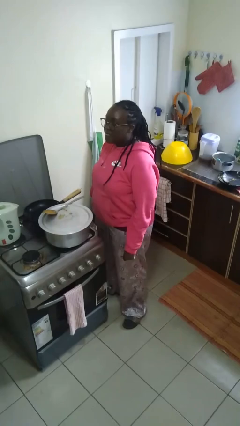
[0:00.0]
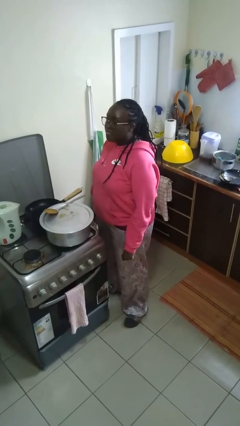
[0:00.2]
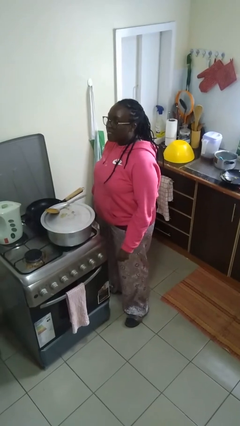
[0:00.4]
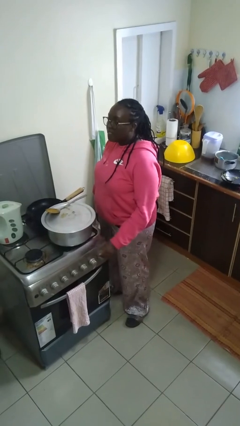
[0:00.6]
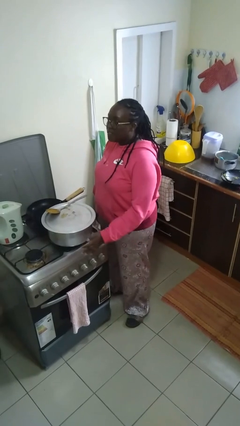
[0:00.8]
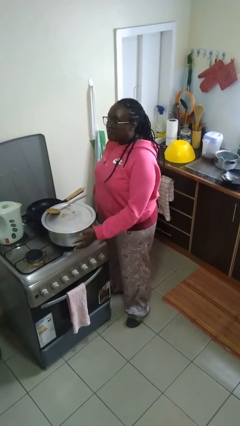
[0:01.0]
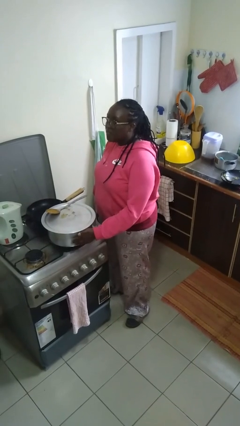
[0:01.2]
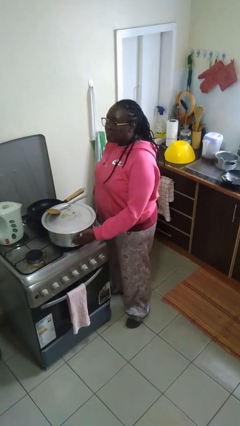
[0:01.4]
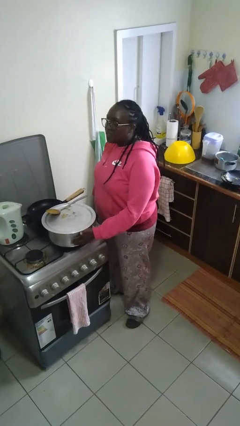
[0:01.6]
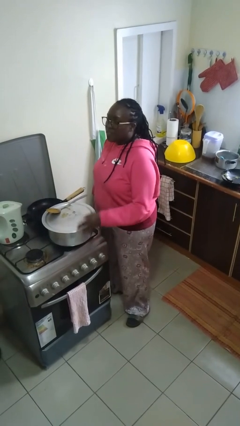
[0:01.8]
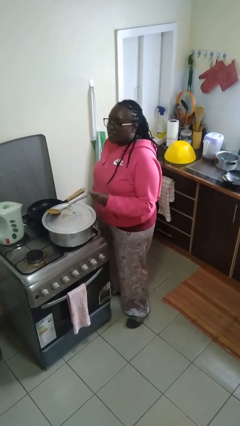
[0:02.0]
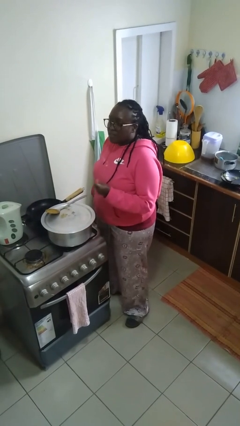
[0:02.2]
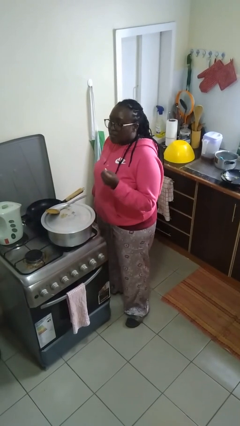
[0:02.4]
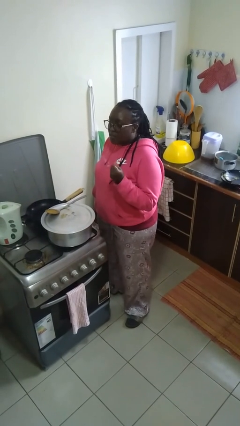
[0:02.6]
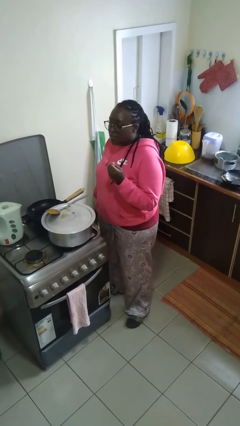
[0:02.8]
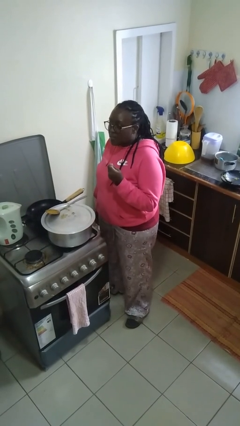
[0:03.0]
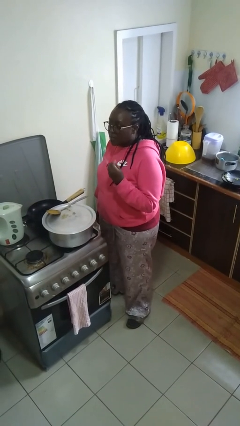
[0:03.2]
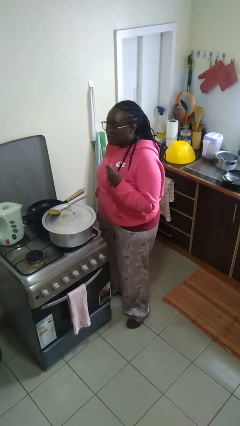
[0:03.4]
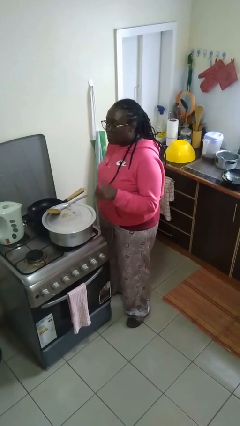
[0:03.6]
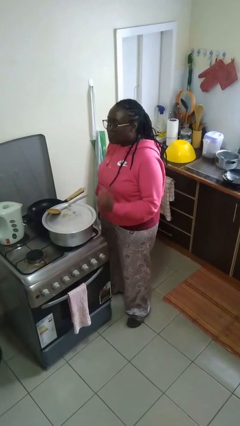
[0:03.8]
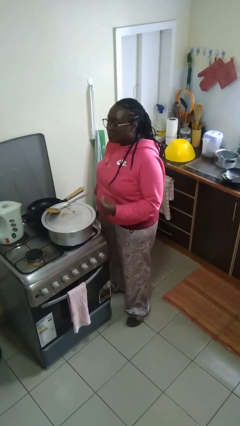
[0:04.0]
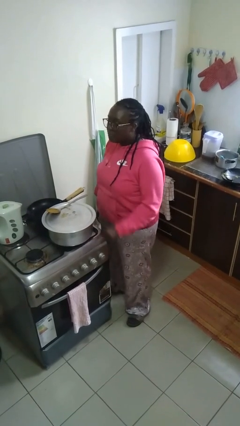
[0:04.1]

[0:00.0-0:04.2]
person burns hand

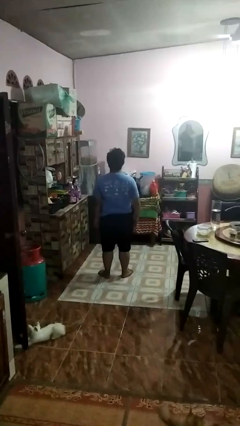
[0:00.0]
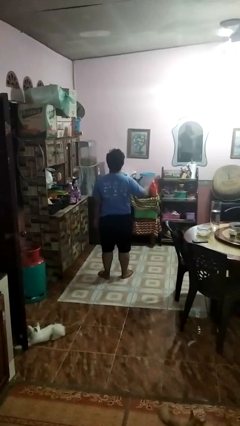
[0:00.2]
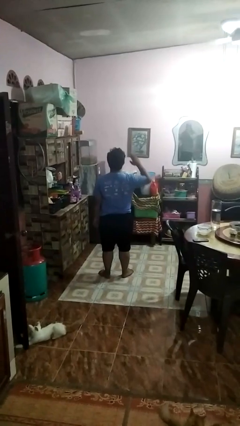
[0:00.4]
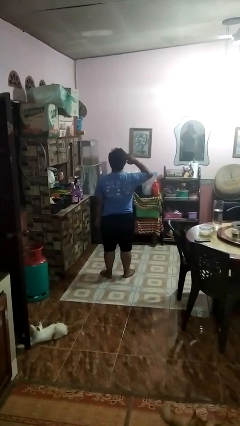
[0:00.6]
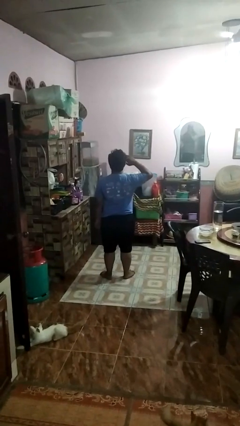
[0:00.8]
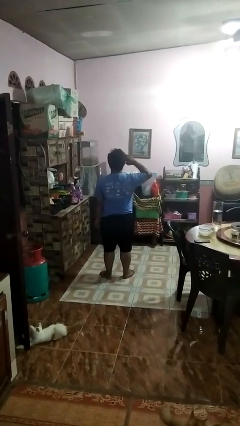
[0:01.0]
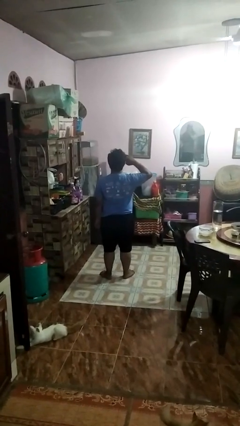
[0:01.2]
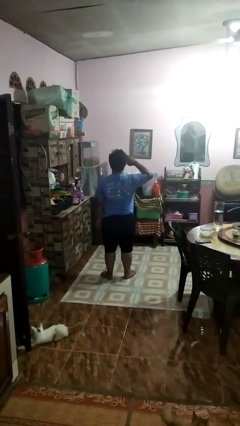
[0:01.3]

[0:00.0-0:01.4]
person salutes

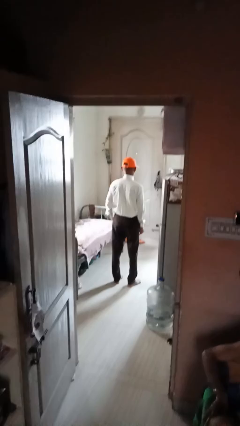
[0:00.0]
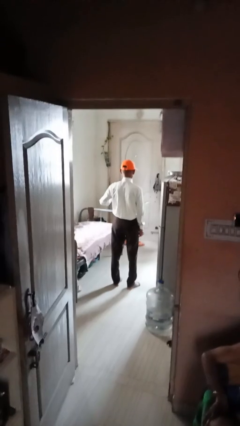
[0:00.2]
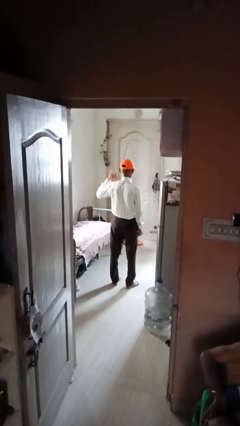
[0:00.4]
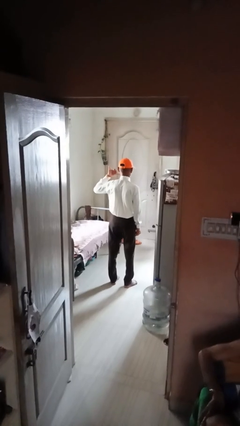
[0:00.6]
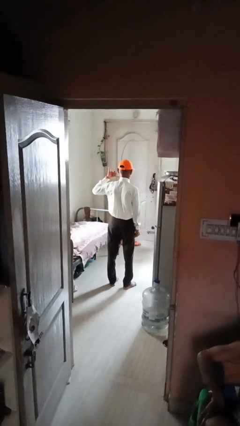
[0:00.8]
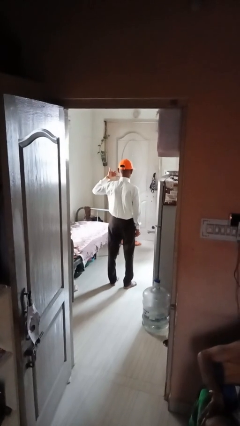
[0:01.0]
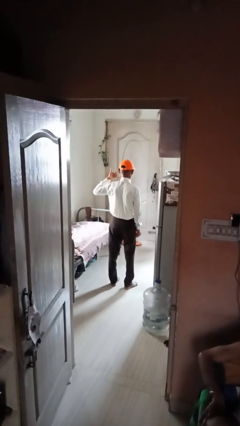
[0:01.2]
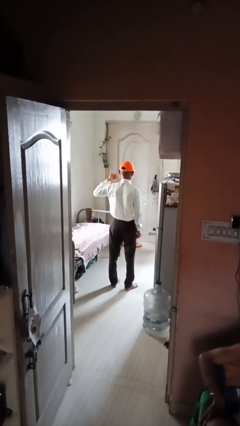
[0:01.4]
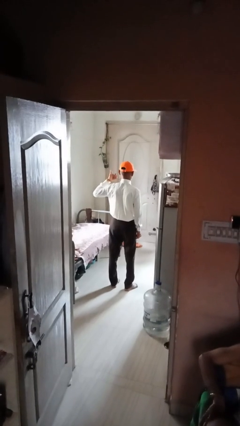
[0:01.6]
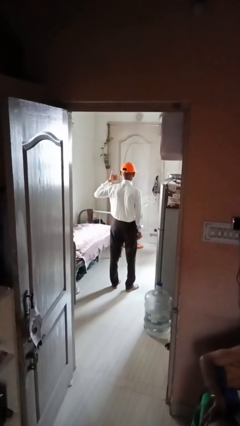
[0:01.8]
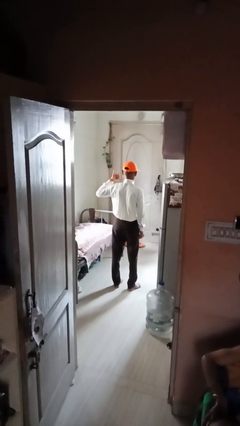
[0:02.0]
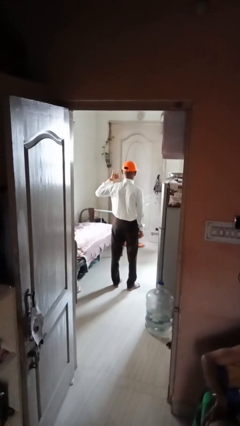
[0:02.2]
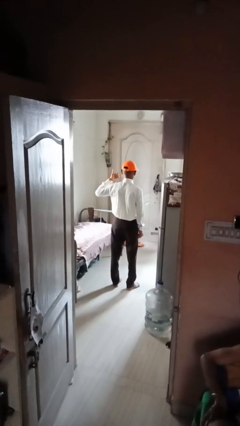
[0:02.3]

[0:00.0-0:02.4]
person gestures call me

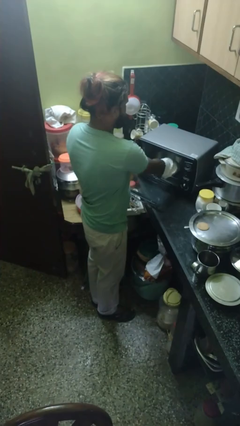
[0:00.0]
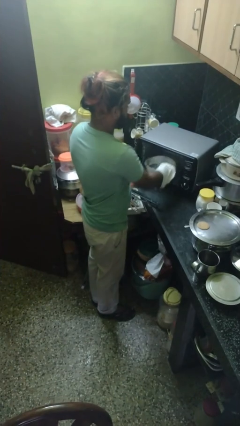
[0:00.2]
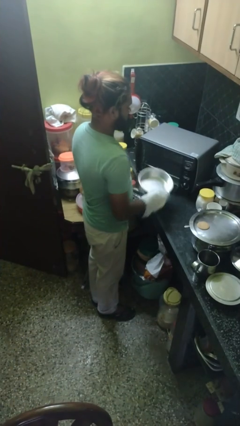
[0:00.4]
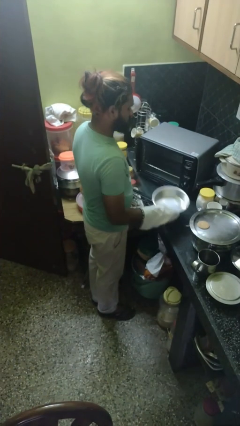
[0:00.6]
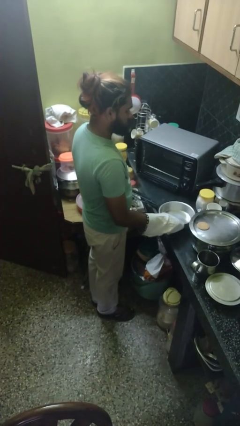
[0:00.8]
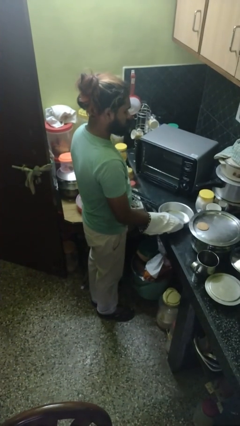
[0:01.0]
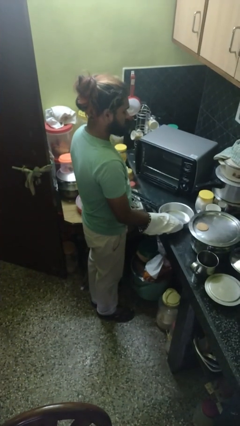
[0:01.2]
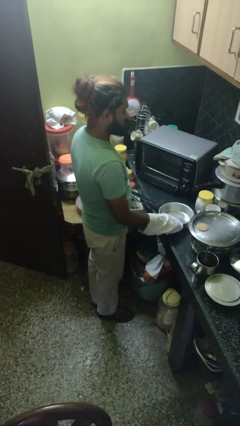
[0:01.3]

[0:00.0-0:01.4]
person takes object from oven

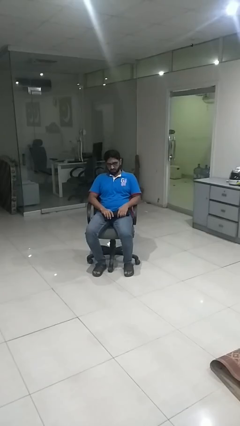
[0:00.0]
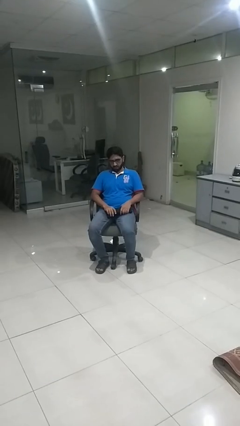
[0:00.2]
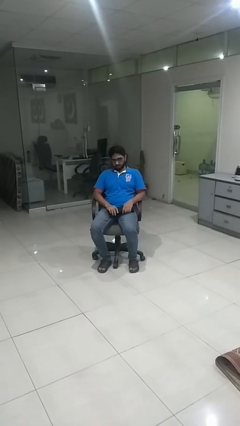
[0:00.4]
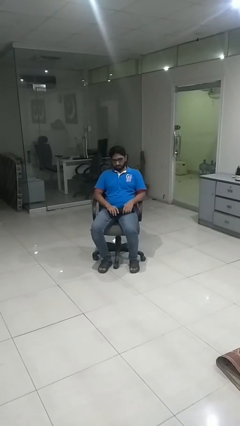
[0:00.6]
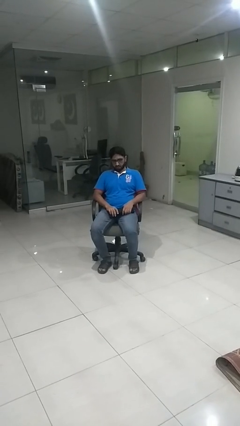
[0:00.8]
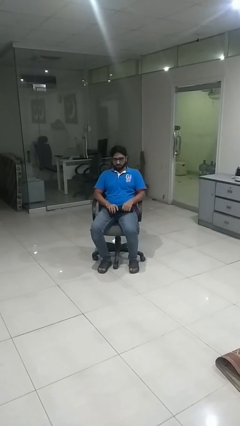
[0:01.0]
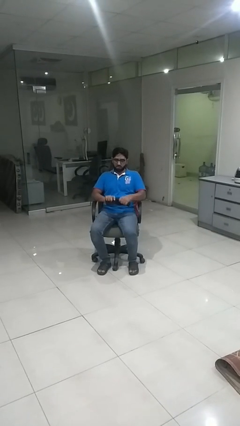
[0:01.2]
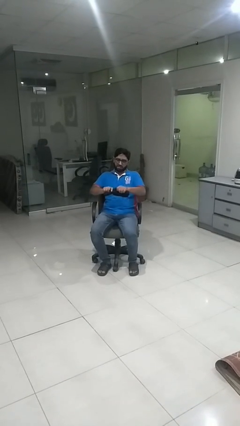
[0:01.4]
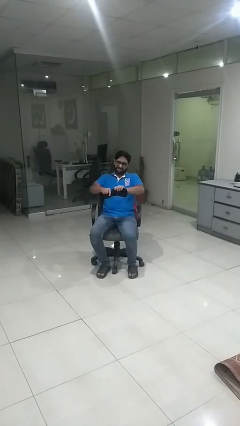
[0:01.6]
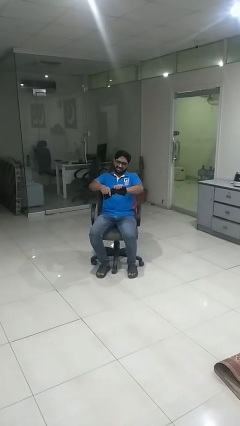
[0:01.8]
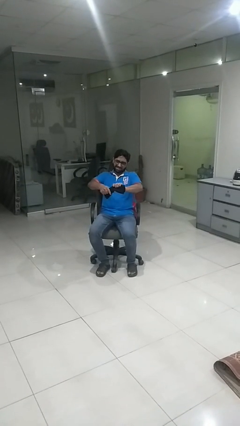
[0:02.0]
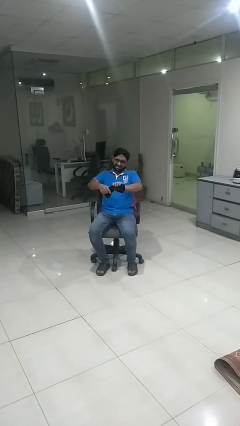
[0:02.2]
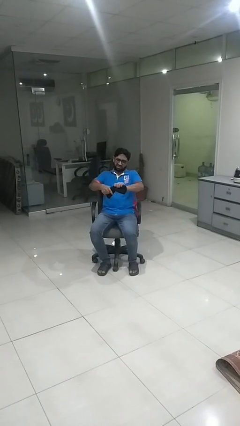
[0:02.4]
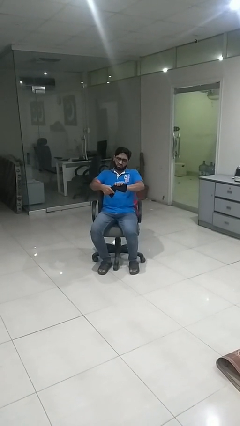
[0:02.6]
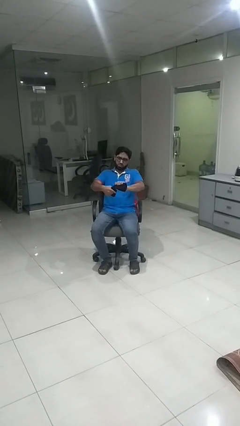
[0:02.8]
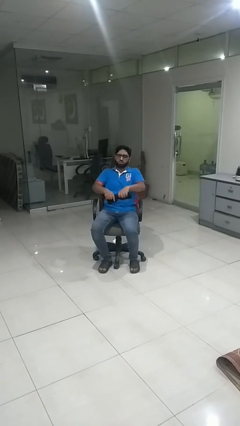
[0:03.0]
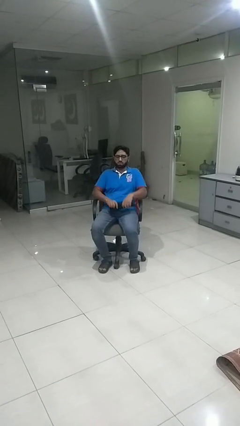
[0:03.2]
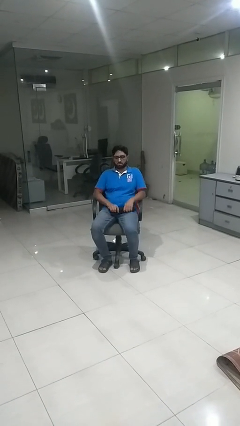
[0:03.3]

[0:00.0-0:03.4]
person squeezes object

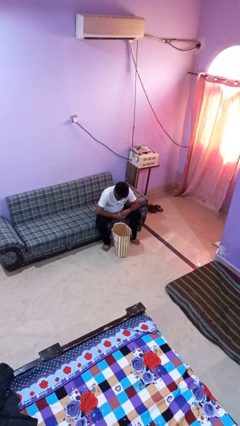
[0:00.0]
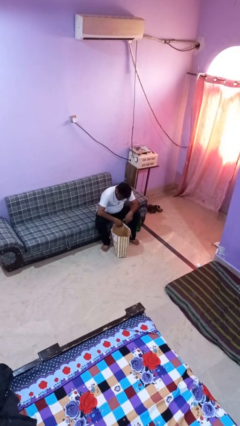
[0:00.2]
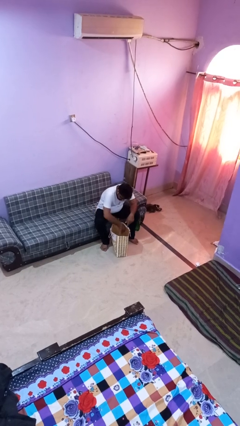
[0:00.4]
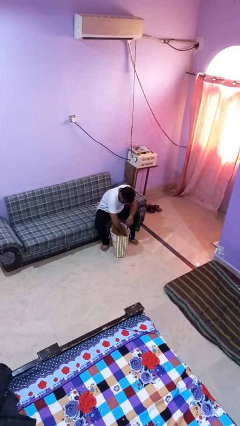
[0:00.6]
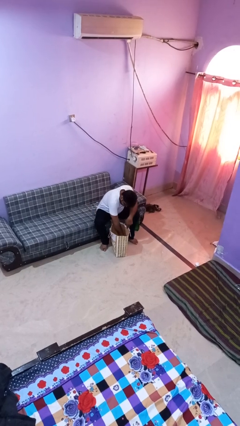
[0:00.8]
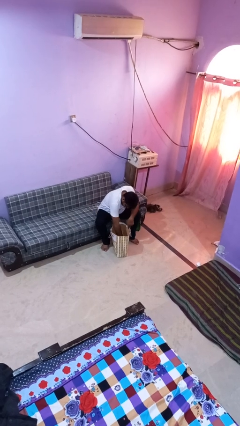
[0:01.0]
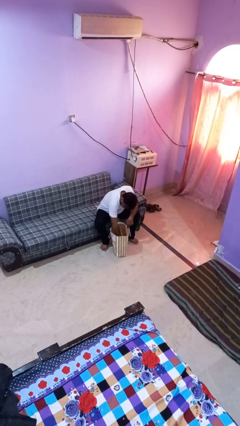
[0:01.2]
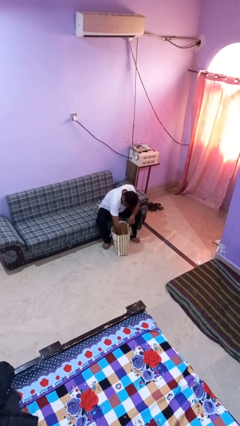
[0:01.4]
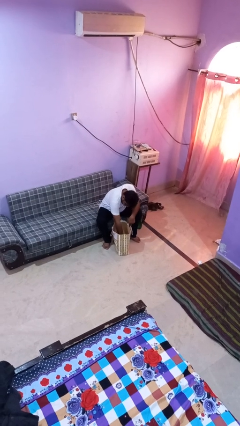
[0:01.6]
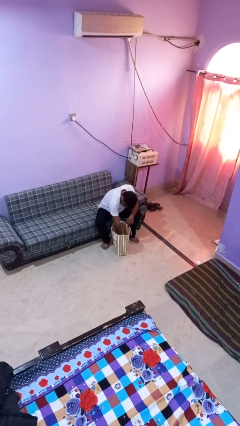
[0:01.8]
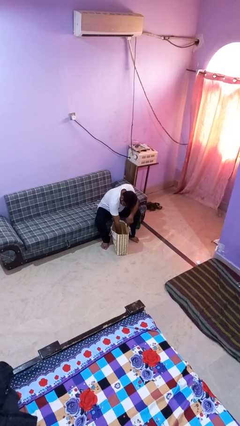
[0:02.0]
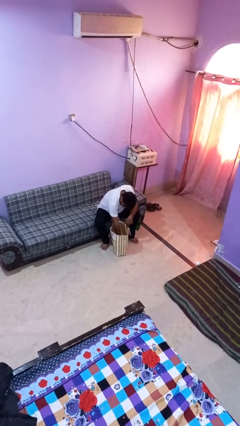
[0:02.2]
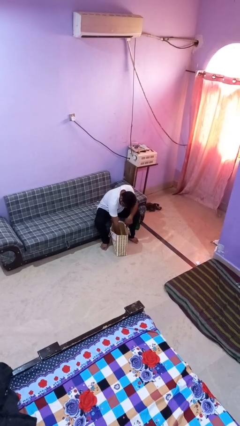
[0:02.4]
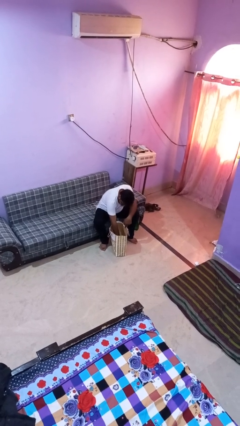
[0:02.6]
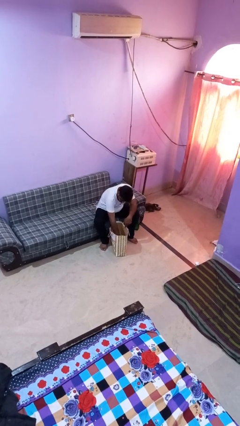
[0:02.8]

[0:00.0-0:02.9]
person searches in bag

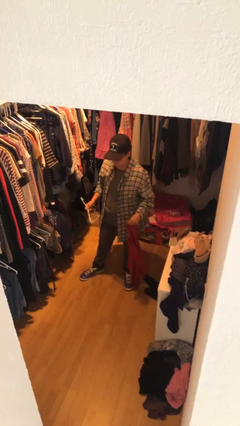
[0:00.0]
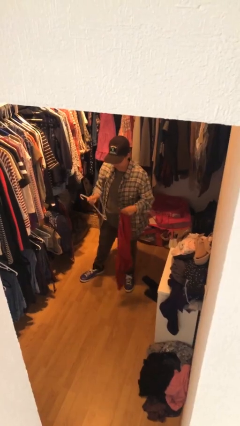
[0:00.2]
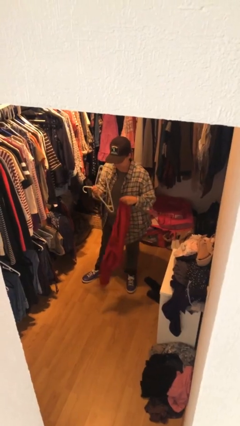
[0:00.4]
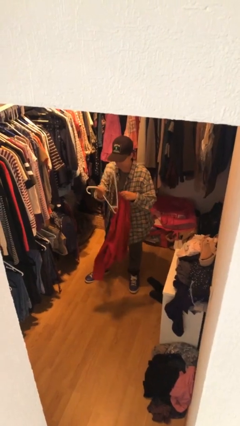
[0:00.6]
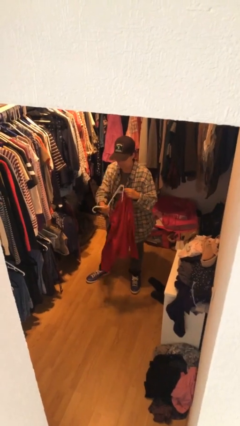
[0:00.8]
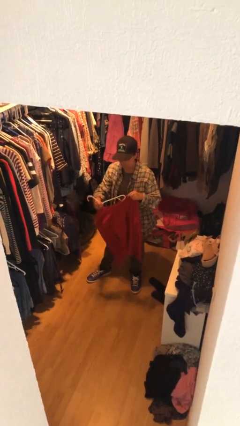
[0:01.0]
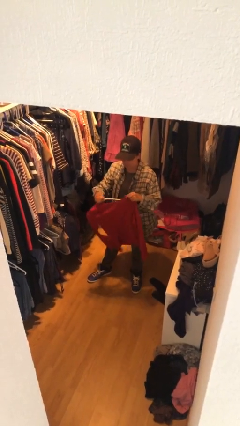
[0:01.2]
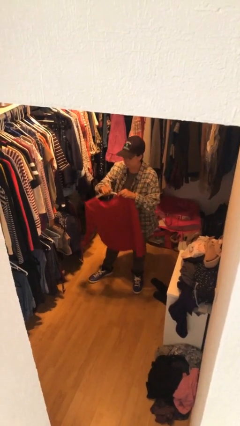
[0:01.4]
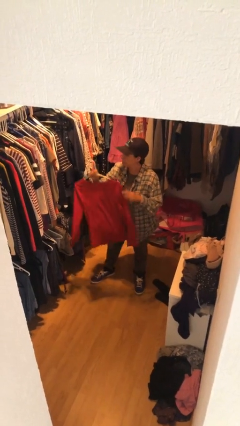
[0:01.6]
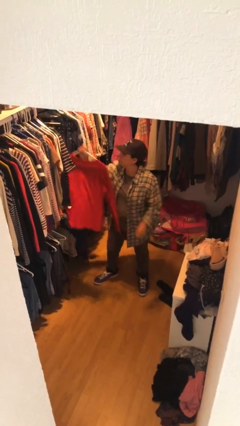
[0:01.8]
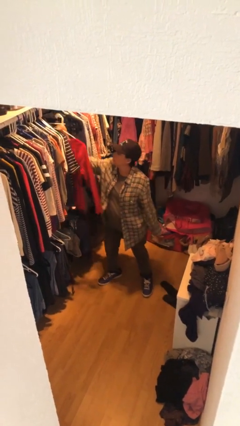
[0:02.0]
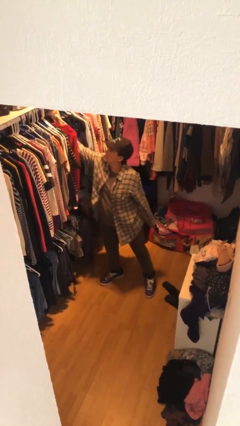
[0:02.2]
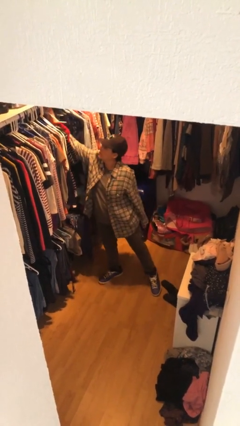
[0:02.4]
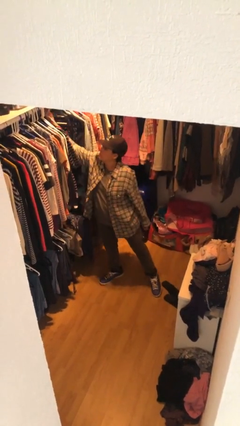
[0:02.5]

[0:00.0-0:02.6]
person puts clothes into closet
